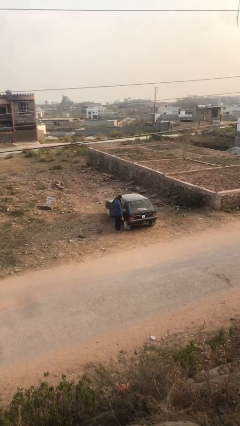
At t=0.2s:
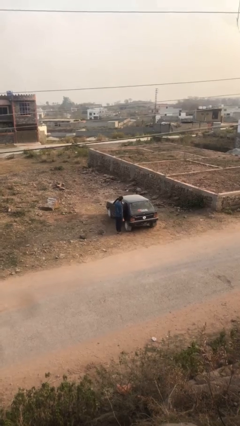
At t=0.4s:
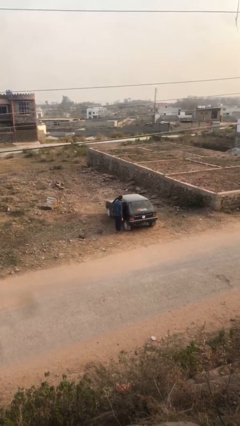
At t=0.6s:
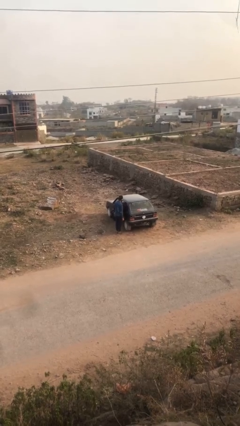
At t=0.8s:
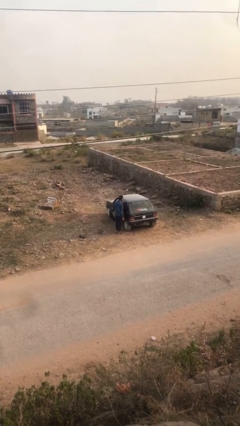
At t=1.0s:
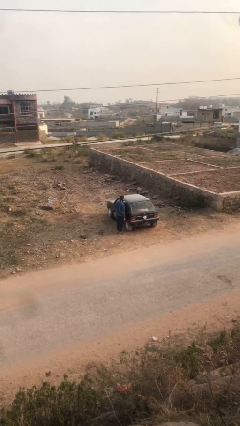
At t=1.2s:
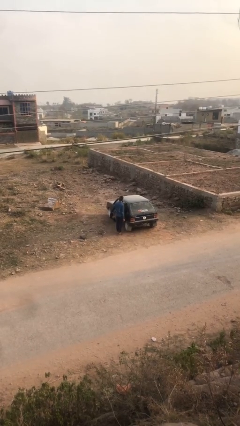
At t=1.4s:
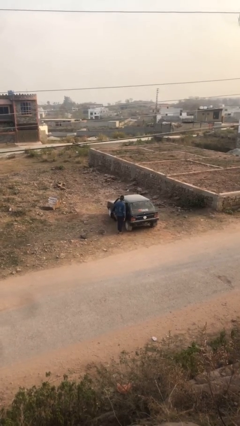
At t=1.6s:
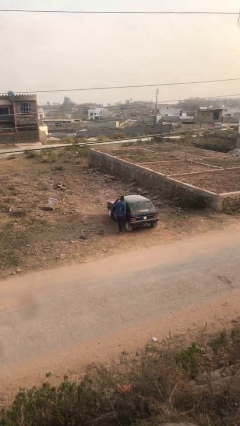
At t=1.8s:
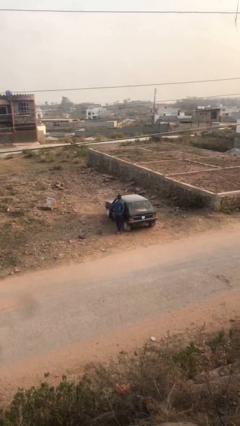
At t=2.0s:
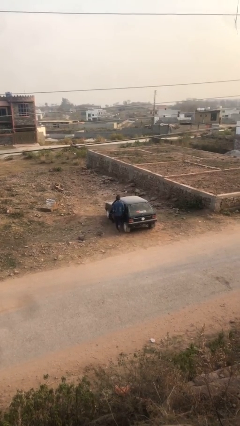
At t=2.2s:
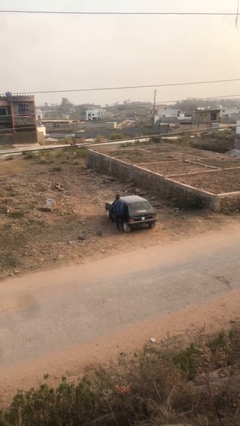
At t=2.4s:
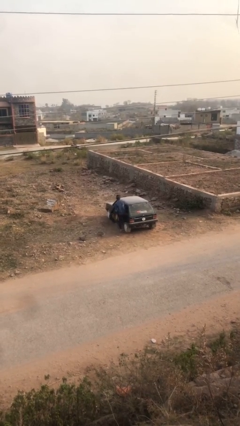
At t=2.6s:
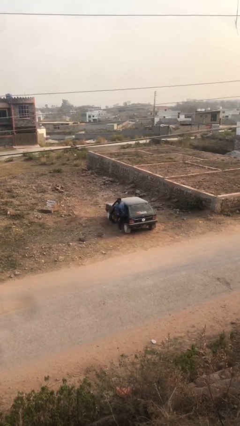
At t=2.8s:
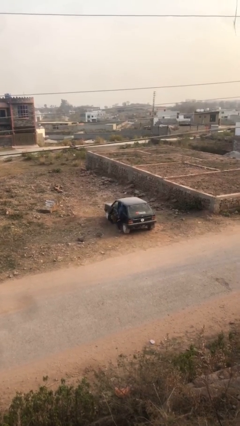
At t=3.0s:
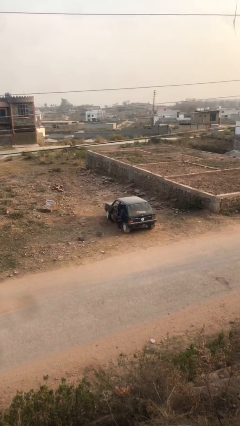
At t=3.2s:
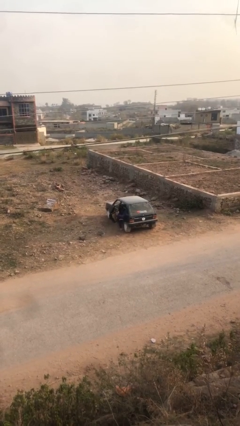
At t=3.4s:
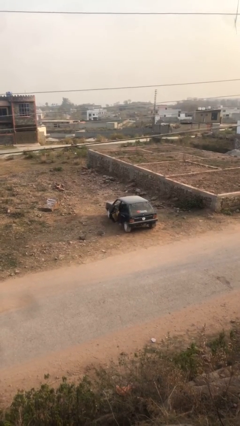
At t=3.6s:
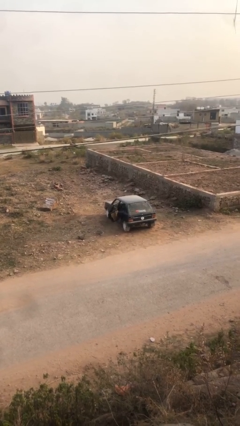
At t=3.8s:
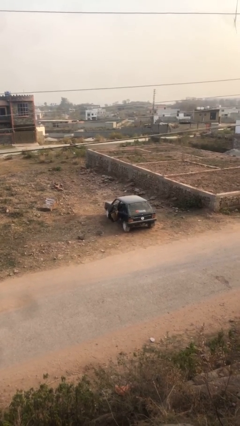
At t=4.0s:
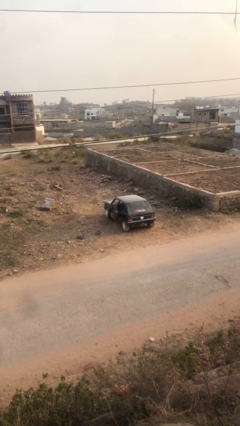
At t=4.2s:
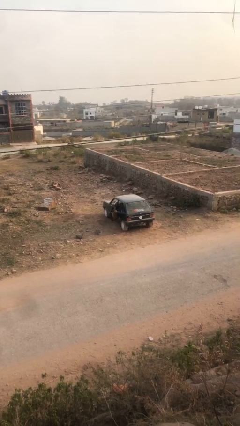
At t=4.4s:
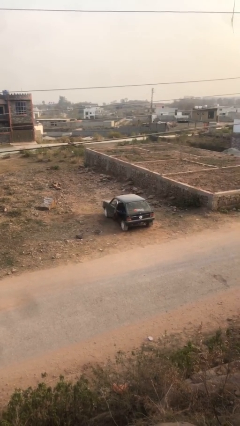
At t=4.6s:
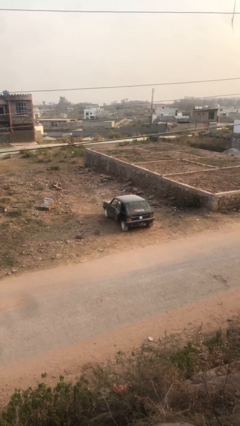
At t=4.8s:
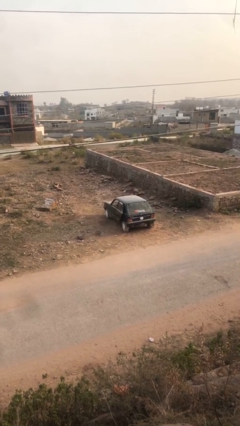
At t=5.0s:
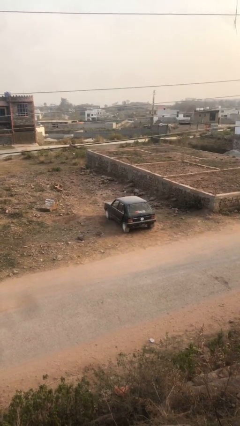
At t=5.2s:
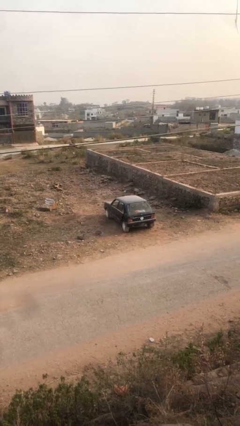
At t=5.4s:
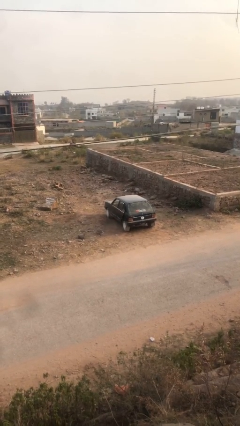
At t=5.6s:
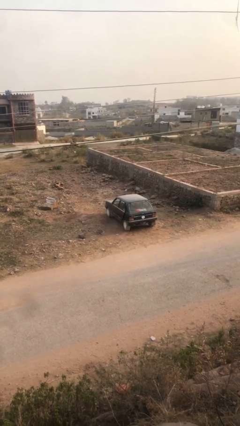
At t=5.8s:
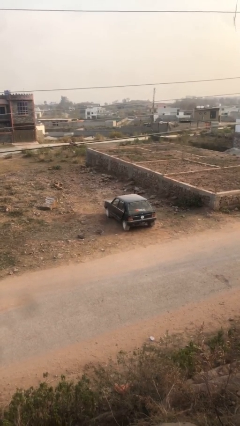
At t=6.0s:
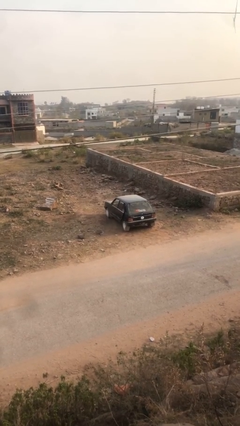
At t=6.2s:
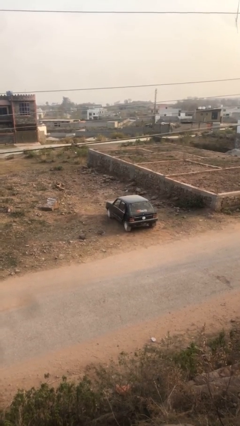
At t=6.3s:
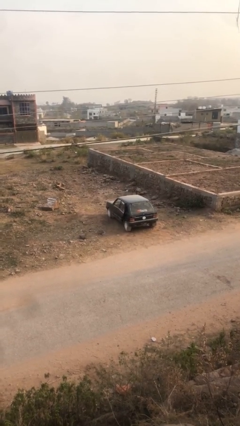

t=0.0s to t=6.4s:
car picks up person

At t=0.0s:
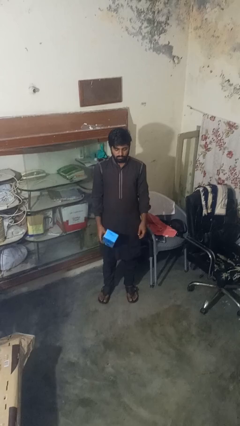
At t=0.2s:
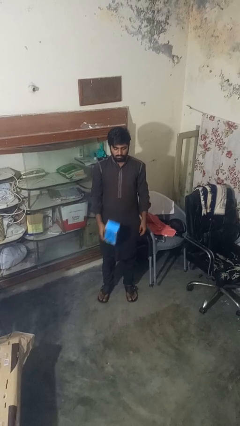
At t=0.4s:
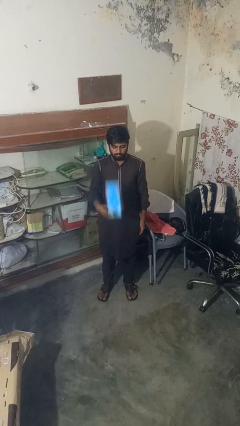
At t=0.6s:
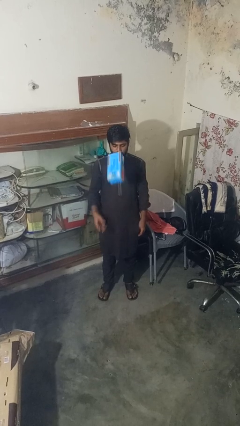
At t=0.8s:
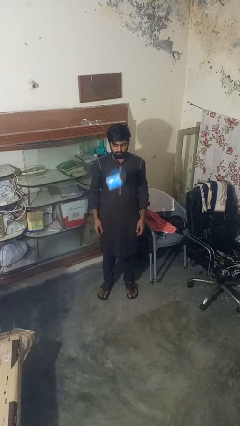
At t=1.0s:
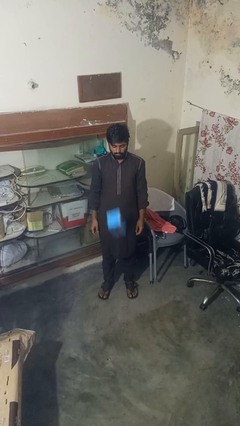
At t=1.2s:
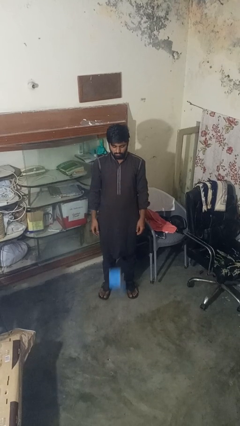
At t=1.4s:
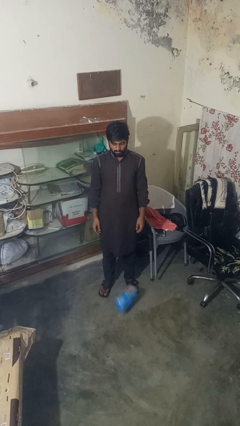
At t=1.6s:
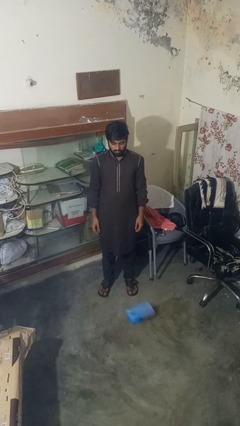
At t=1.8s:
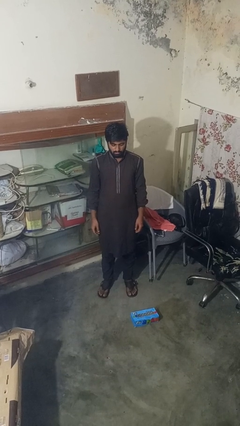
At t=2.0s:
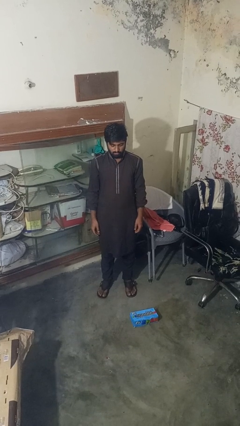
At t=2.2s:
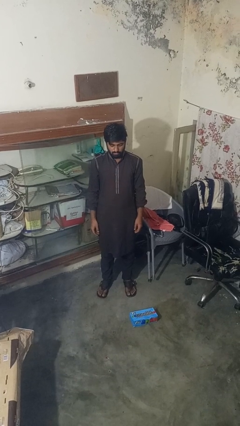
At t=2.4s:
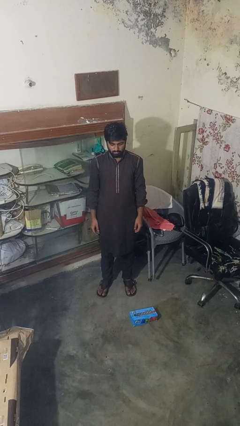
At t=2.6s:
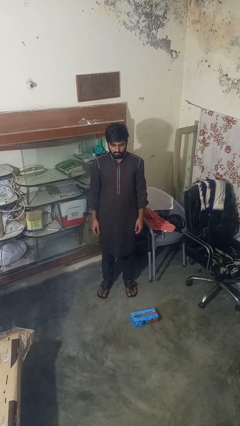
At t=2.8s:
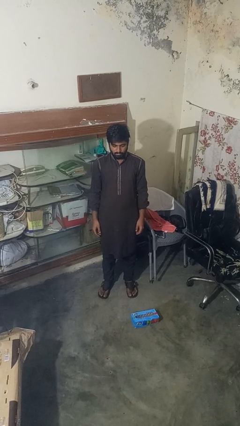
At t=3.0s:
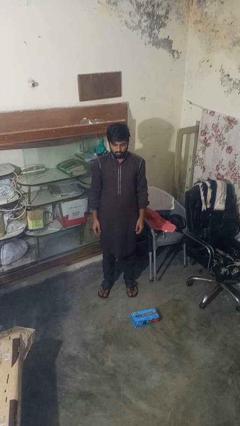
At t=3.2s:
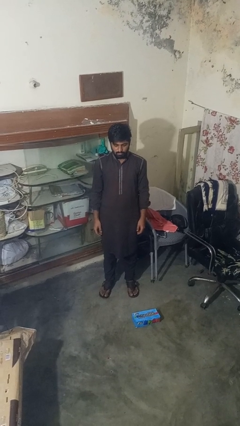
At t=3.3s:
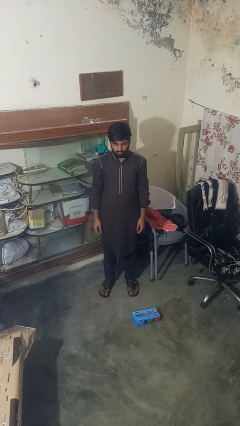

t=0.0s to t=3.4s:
person throws object into air

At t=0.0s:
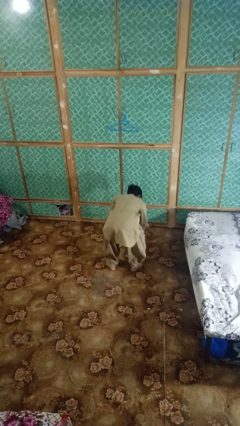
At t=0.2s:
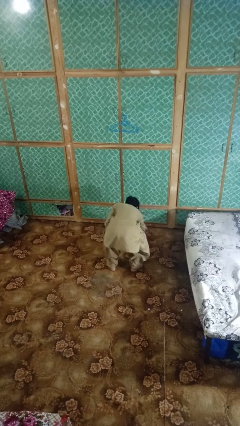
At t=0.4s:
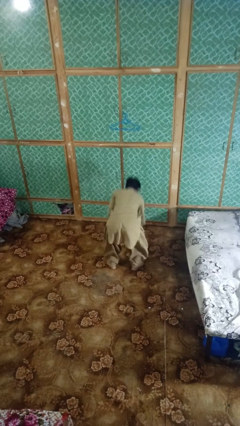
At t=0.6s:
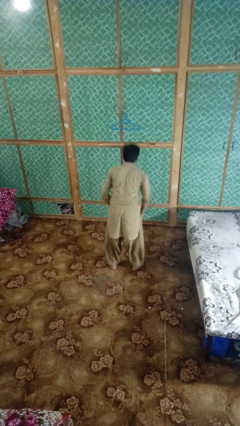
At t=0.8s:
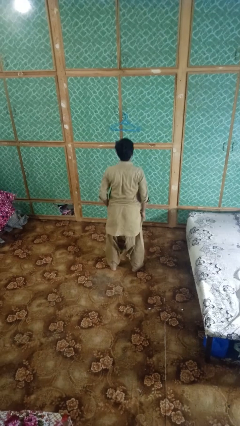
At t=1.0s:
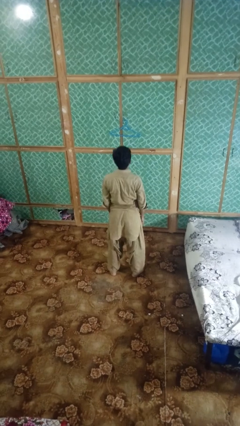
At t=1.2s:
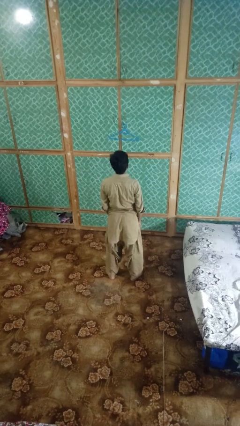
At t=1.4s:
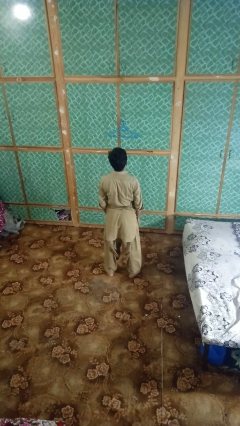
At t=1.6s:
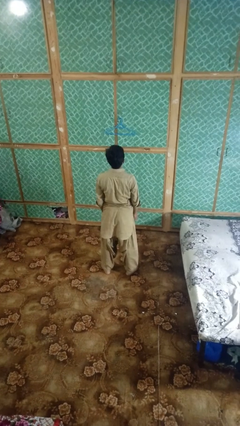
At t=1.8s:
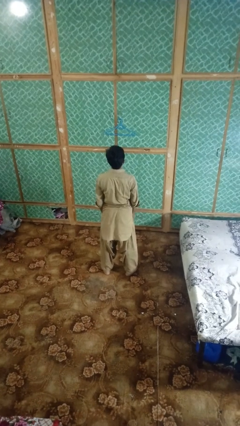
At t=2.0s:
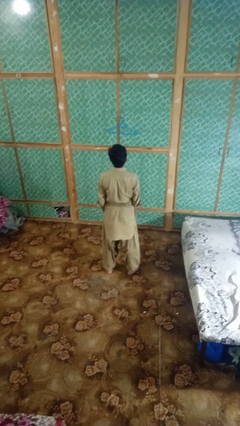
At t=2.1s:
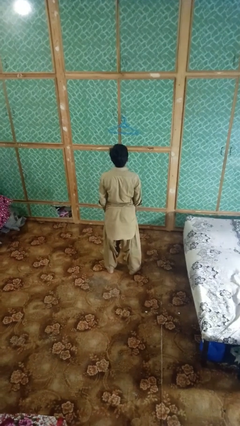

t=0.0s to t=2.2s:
person picks up object from floor

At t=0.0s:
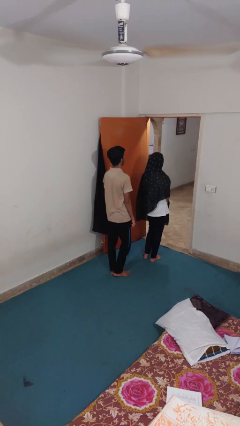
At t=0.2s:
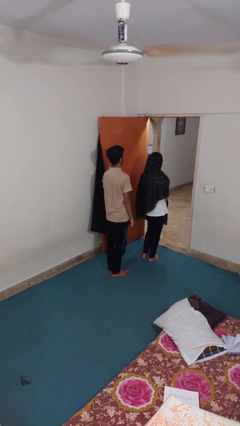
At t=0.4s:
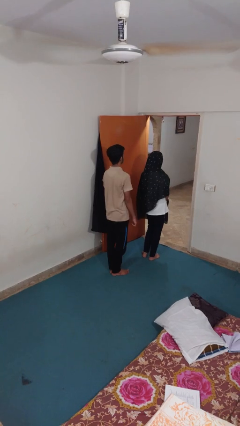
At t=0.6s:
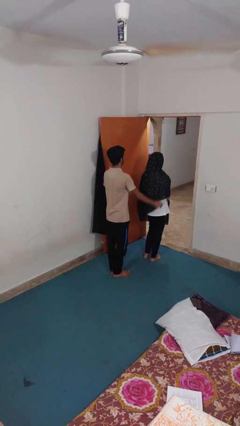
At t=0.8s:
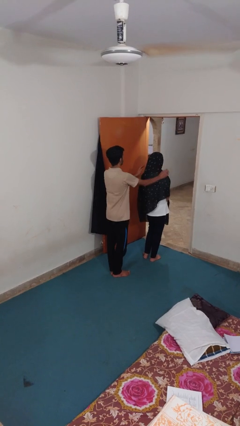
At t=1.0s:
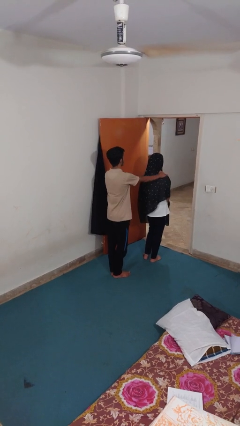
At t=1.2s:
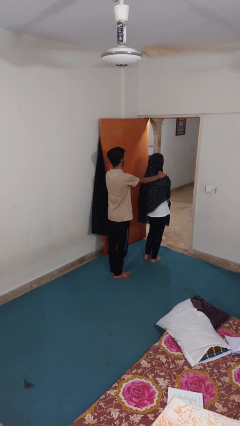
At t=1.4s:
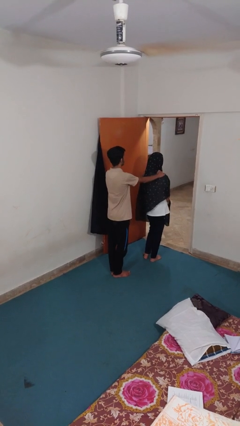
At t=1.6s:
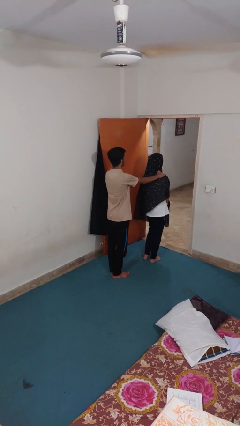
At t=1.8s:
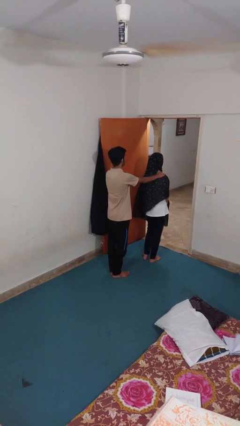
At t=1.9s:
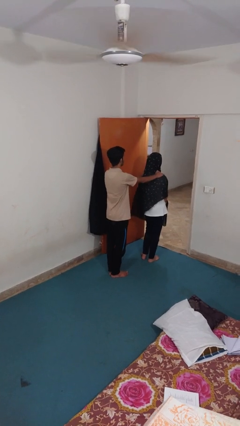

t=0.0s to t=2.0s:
person grabs person by shoulder

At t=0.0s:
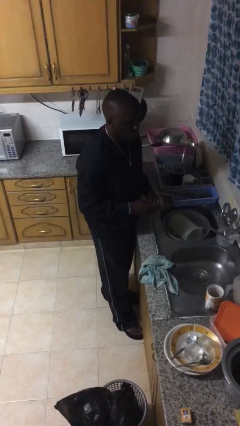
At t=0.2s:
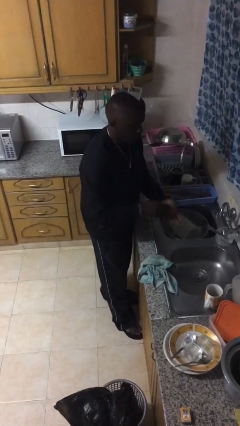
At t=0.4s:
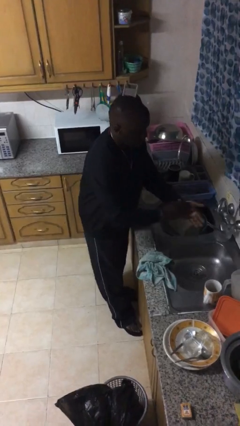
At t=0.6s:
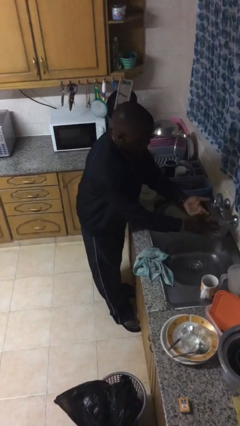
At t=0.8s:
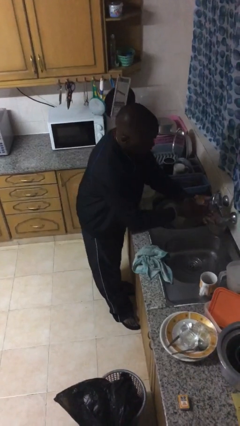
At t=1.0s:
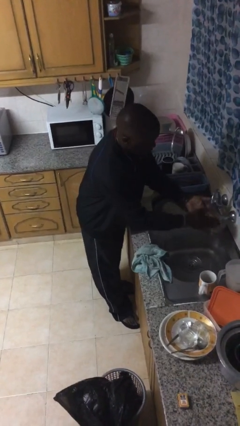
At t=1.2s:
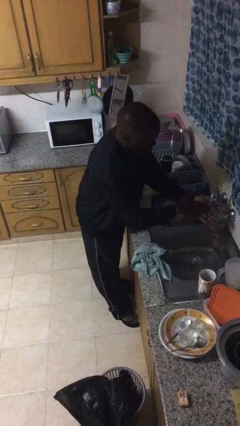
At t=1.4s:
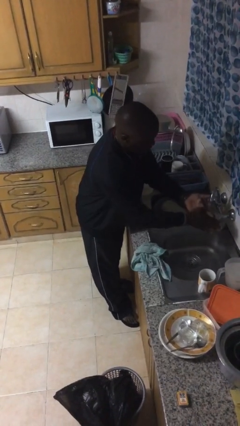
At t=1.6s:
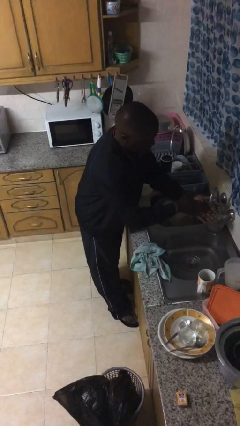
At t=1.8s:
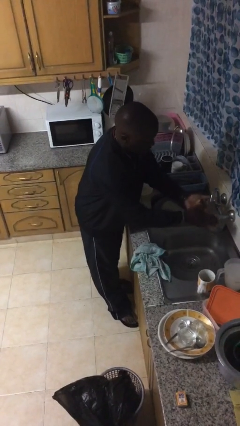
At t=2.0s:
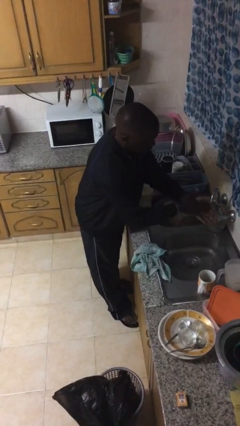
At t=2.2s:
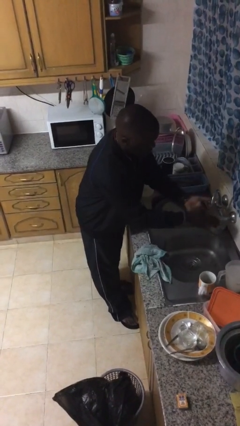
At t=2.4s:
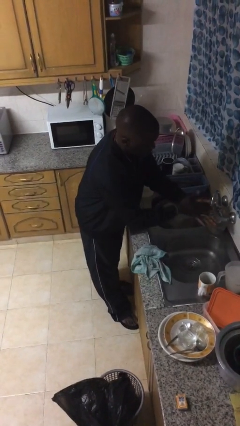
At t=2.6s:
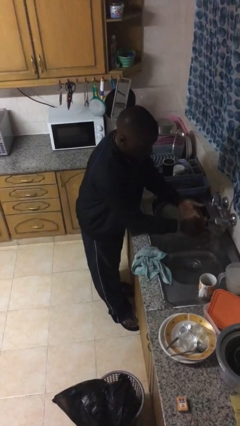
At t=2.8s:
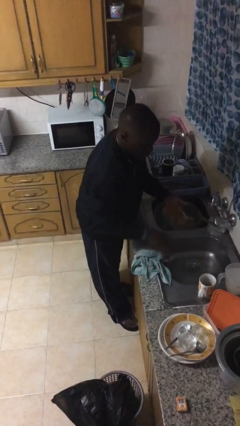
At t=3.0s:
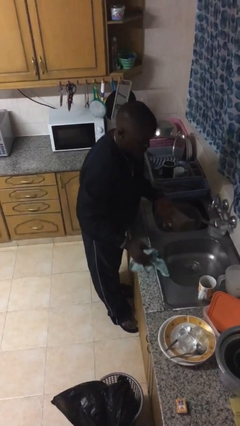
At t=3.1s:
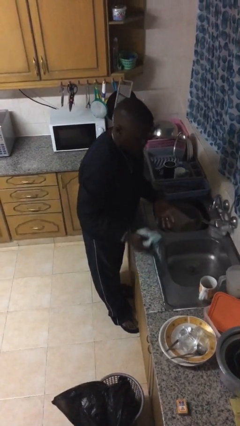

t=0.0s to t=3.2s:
person washes hands
